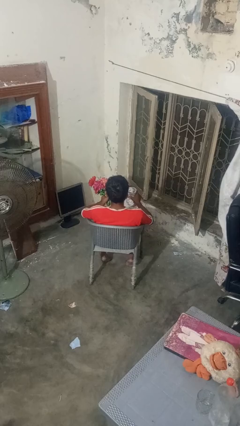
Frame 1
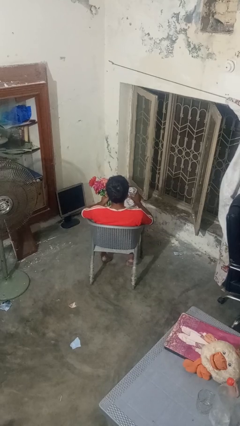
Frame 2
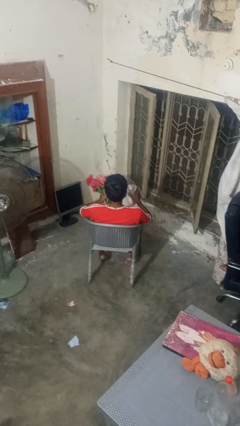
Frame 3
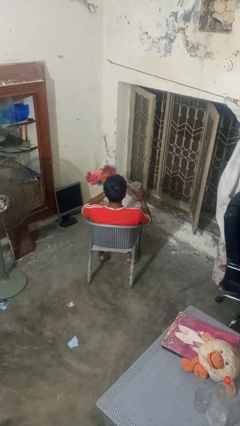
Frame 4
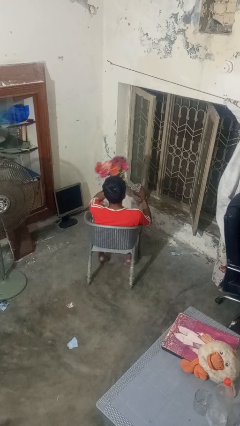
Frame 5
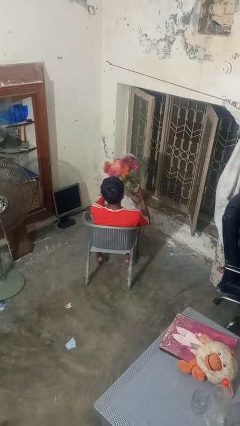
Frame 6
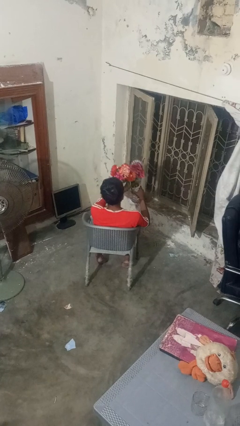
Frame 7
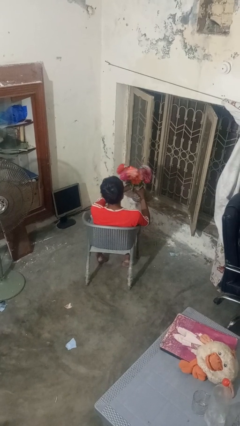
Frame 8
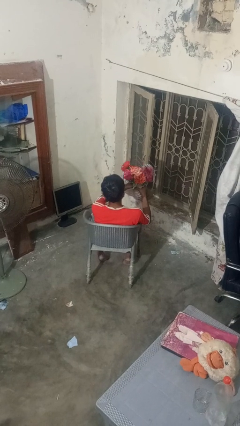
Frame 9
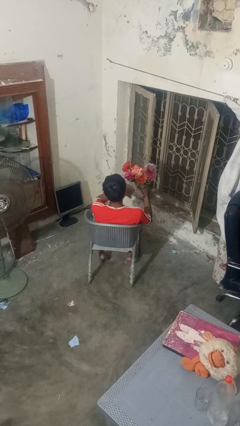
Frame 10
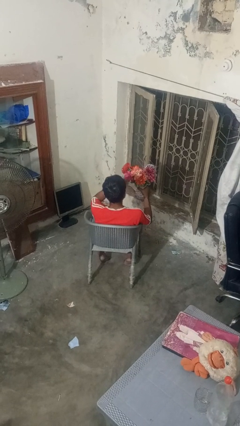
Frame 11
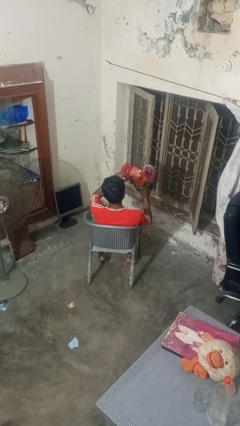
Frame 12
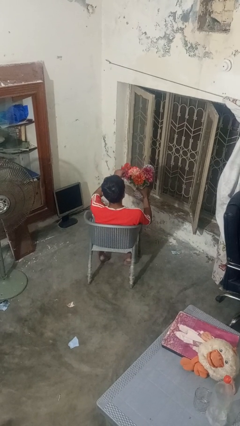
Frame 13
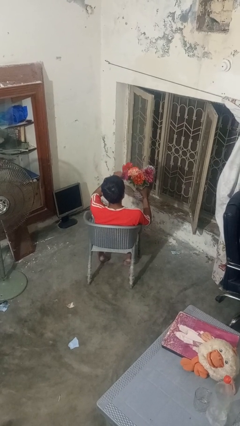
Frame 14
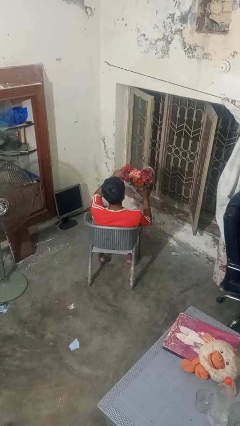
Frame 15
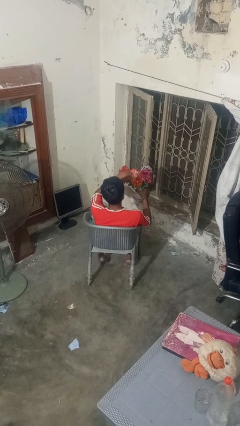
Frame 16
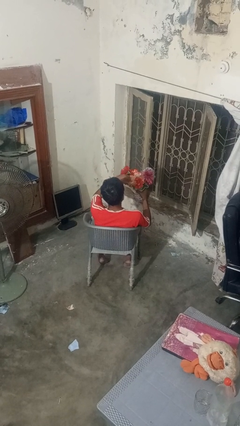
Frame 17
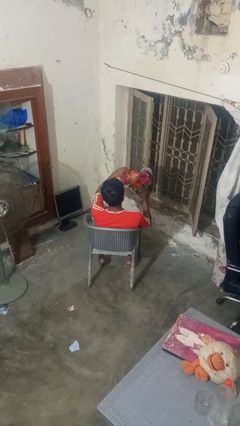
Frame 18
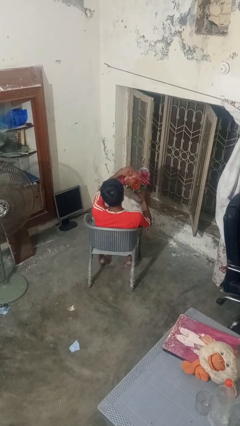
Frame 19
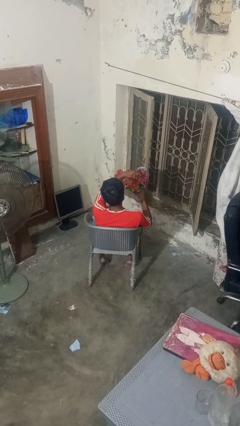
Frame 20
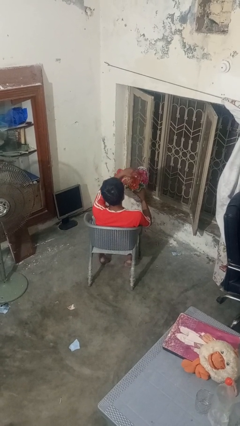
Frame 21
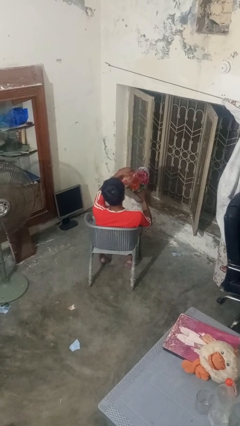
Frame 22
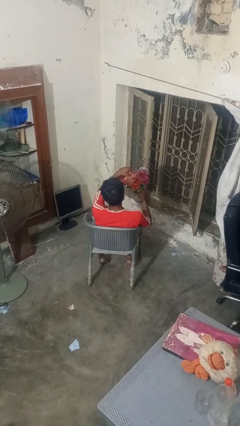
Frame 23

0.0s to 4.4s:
person arranges flowers in vase

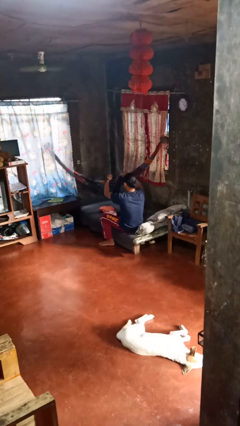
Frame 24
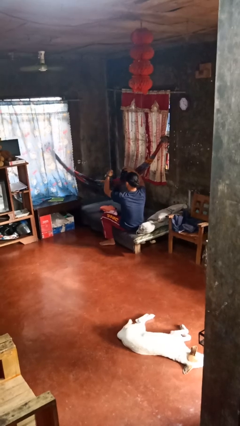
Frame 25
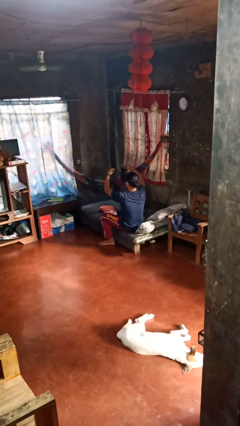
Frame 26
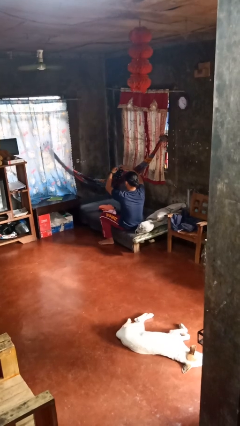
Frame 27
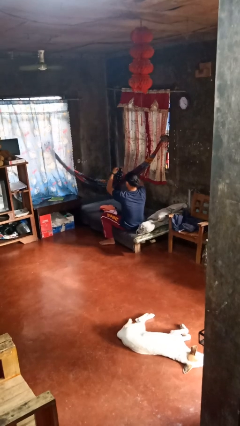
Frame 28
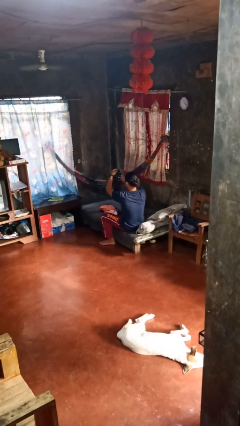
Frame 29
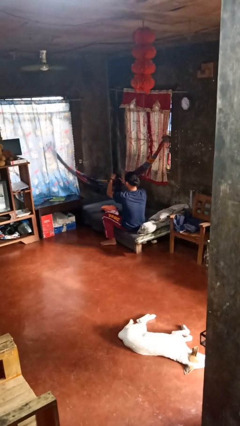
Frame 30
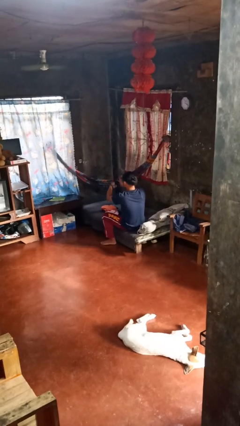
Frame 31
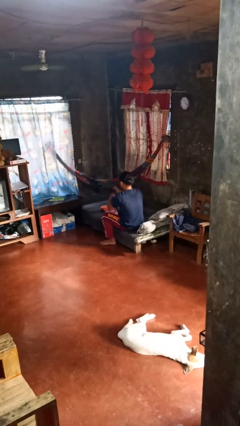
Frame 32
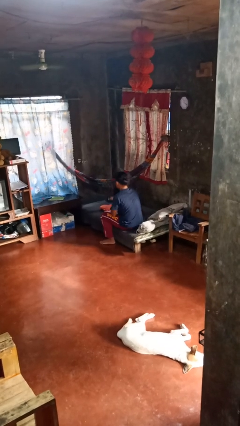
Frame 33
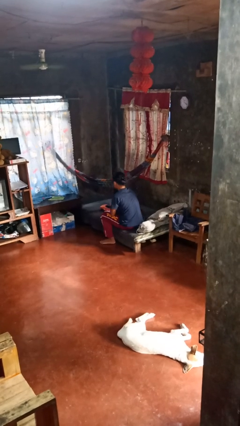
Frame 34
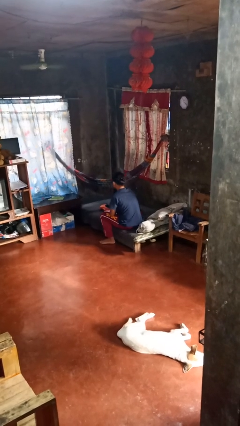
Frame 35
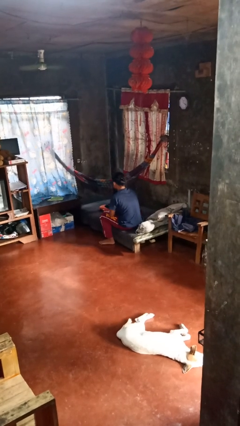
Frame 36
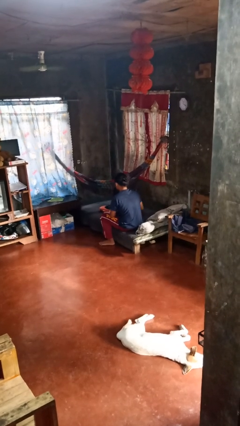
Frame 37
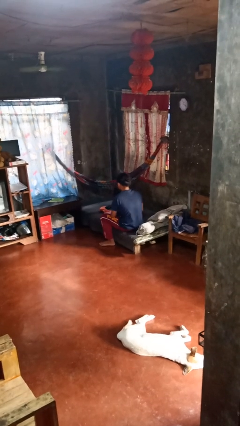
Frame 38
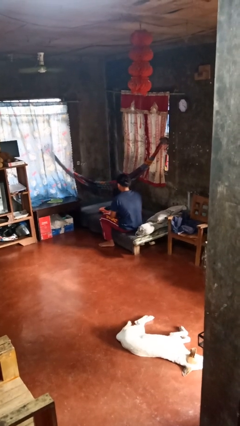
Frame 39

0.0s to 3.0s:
person folds socks

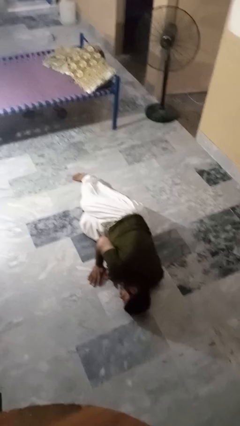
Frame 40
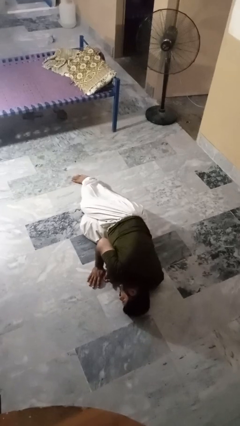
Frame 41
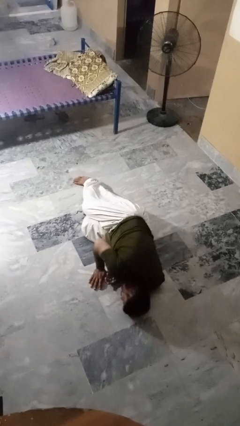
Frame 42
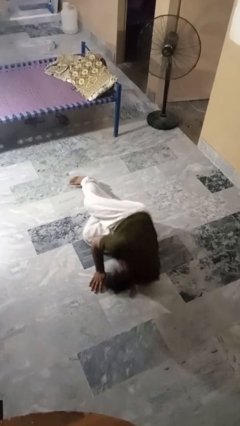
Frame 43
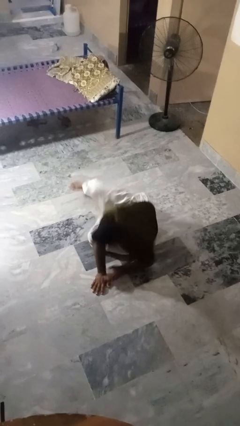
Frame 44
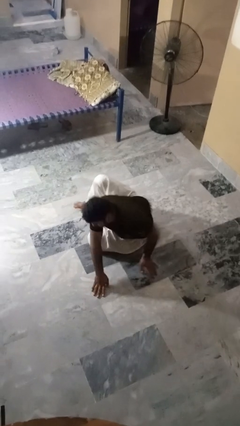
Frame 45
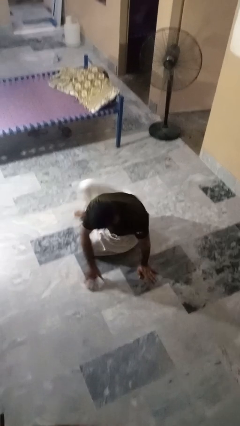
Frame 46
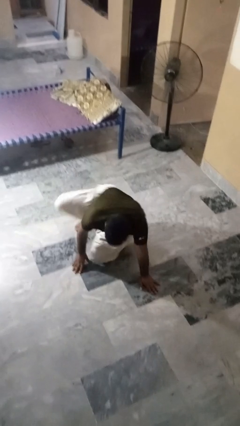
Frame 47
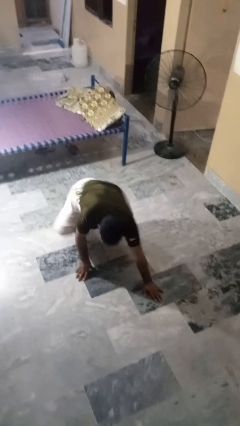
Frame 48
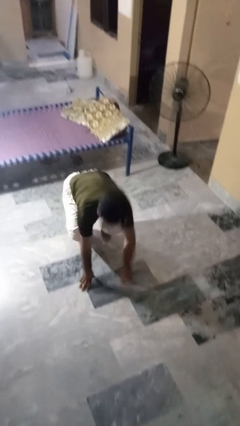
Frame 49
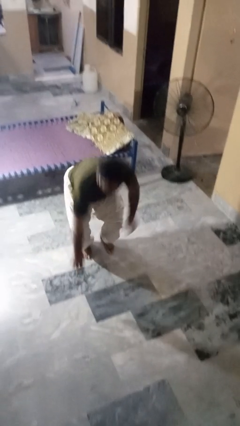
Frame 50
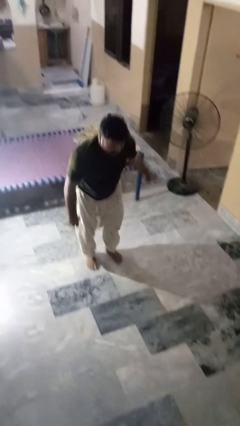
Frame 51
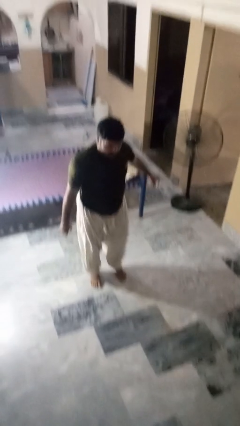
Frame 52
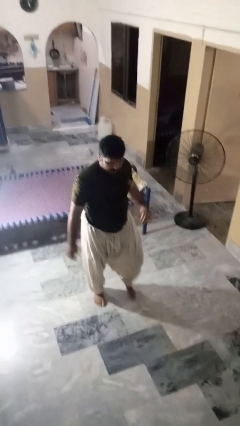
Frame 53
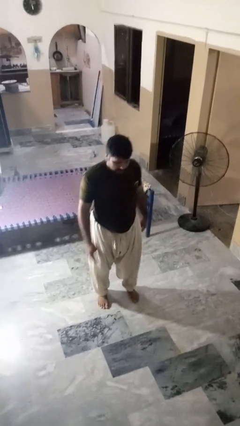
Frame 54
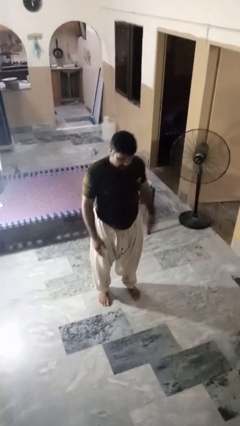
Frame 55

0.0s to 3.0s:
person stands up from floor

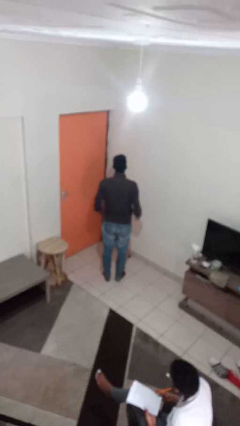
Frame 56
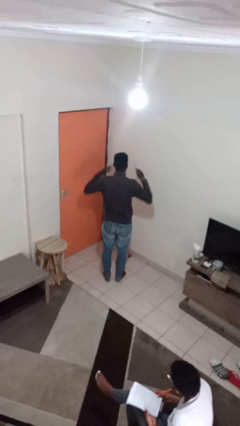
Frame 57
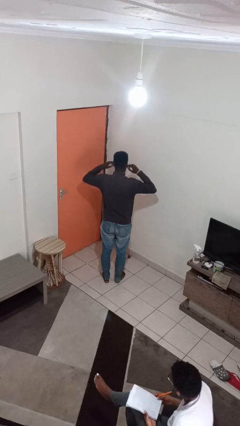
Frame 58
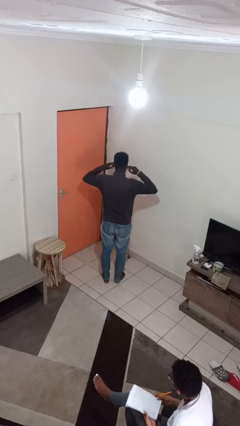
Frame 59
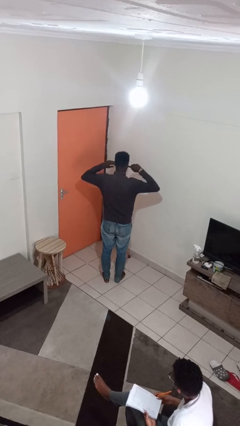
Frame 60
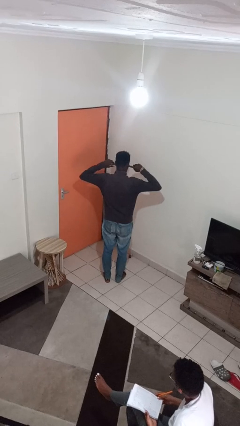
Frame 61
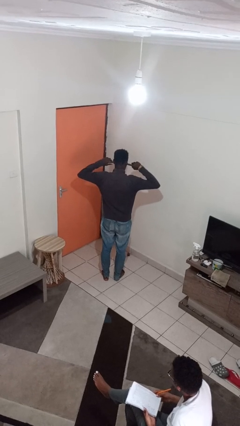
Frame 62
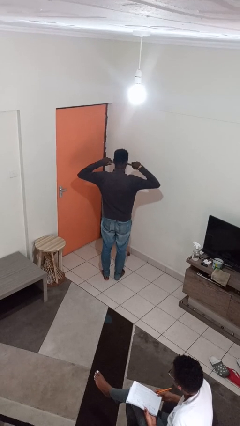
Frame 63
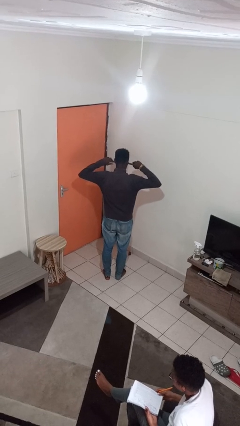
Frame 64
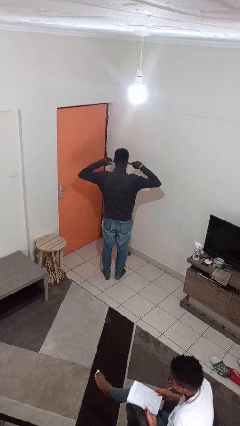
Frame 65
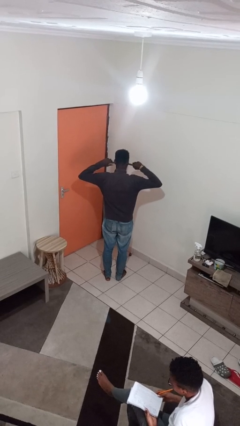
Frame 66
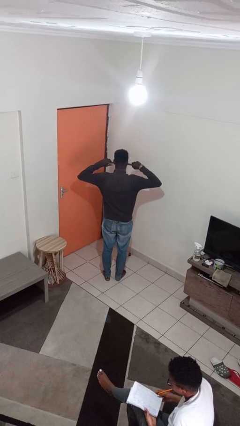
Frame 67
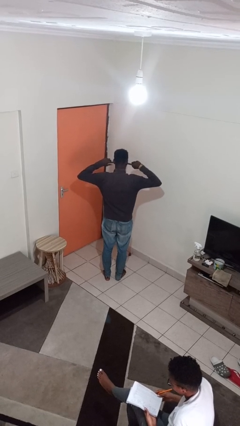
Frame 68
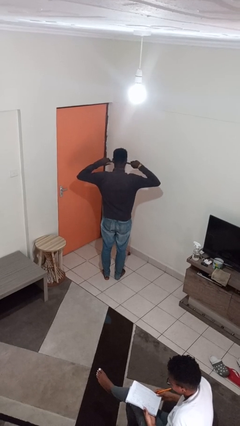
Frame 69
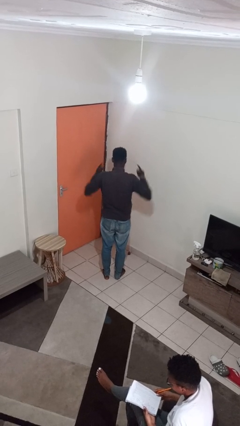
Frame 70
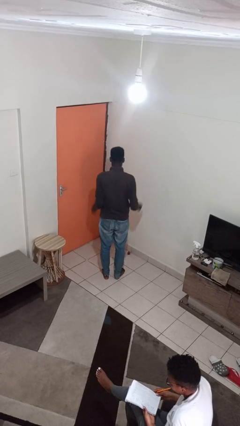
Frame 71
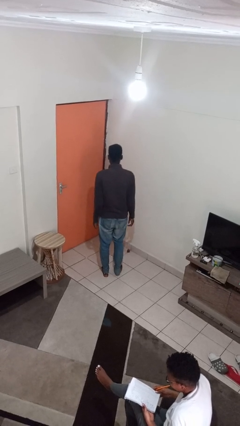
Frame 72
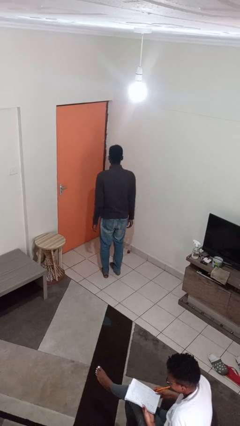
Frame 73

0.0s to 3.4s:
person puts fingers in ear

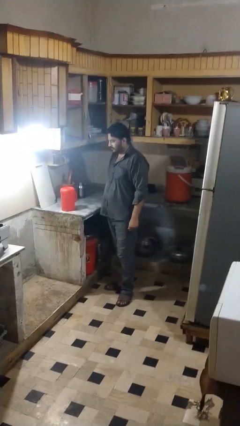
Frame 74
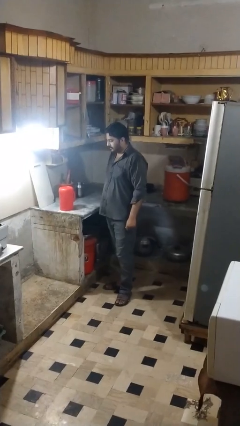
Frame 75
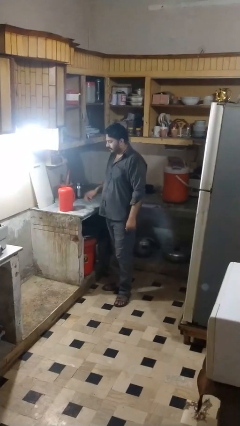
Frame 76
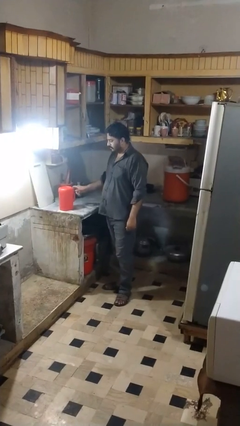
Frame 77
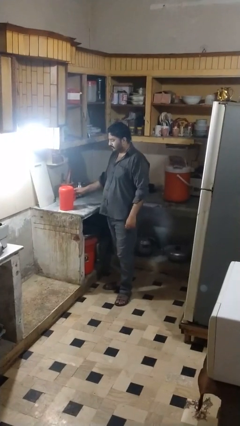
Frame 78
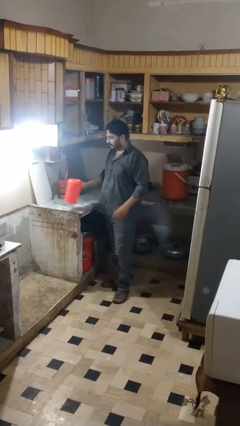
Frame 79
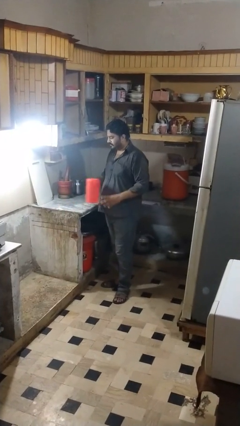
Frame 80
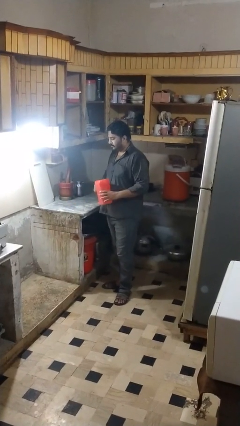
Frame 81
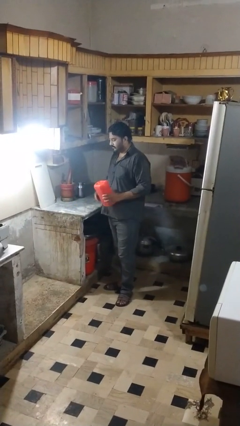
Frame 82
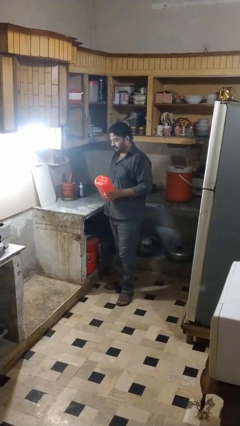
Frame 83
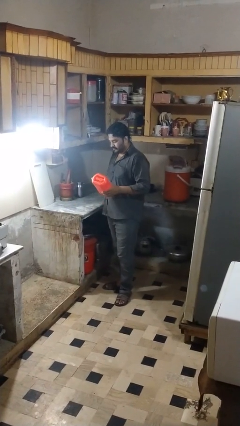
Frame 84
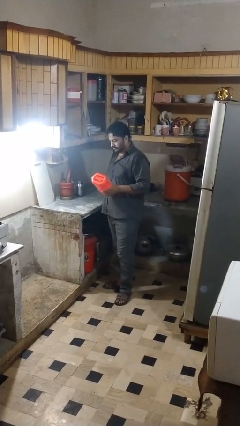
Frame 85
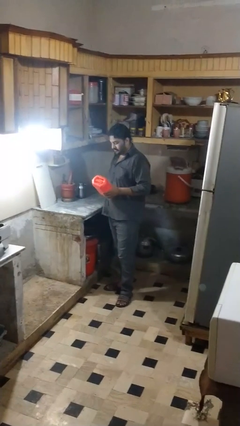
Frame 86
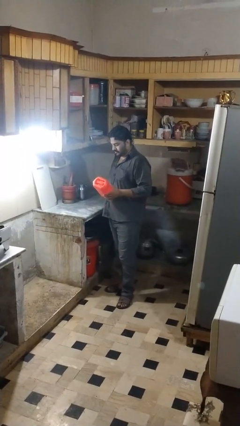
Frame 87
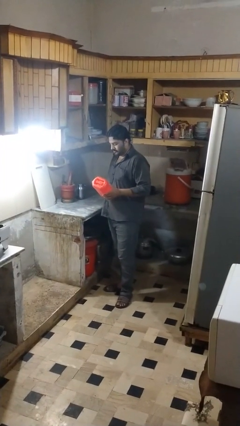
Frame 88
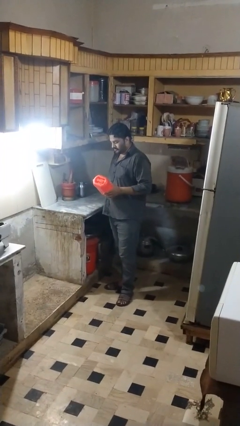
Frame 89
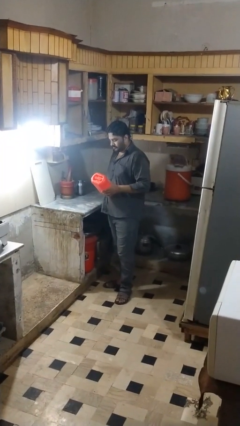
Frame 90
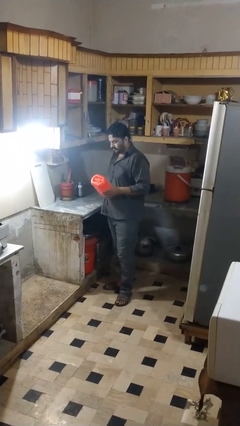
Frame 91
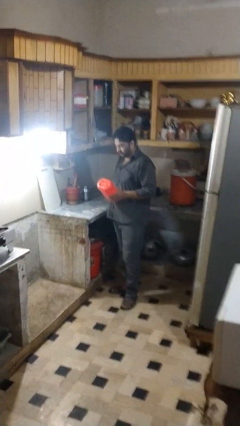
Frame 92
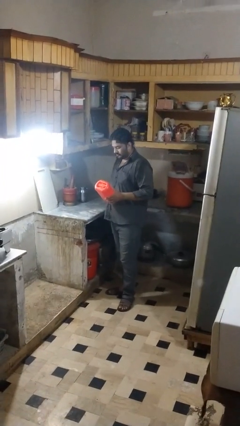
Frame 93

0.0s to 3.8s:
person picks up object from countertop

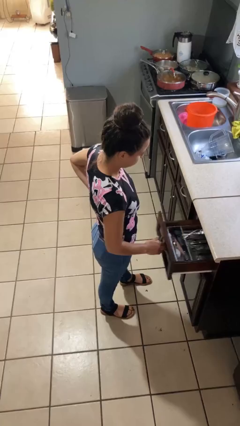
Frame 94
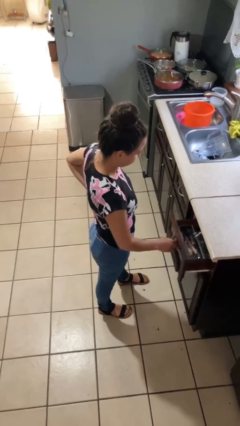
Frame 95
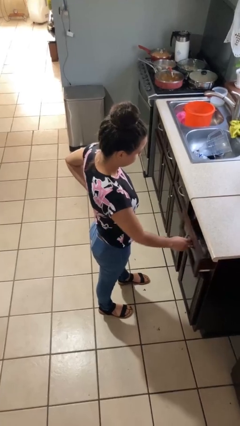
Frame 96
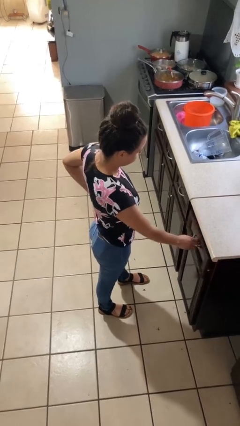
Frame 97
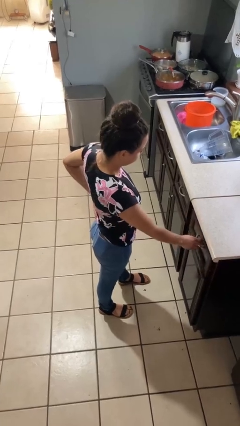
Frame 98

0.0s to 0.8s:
person closes kitchen drawer
